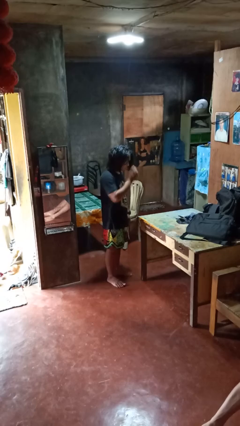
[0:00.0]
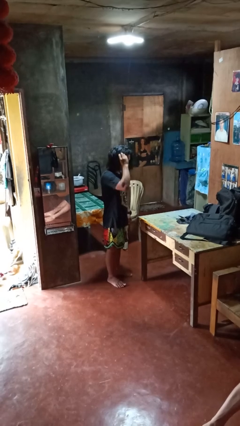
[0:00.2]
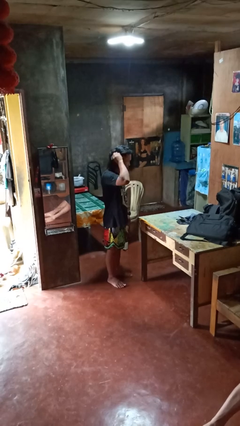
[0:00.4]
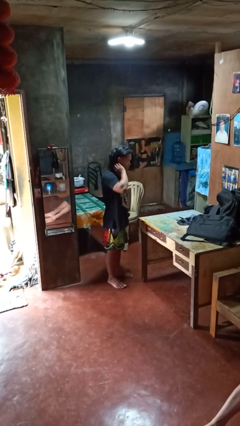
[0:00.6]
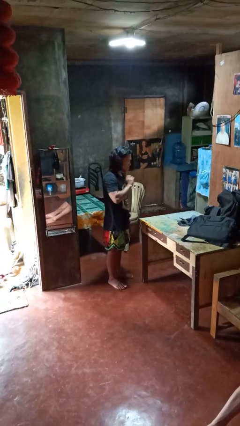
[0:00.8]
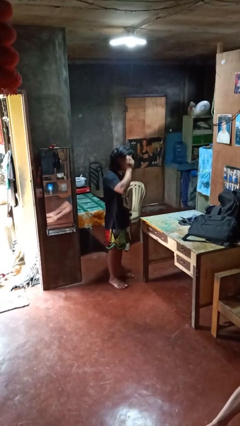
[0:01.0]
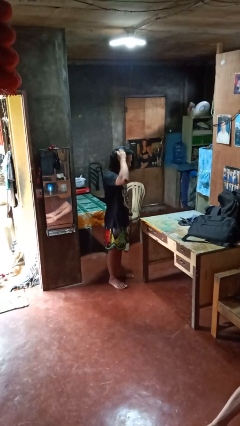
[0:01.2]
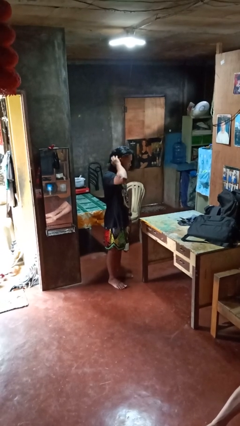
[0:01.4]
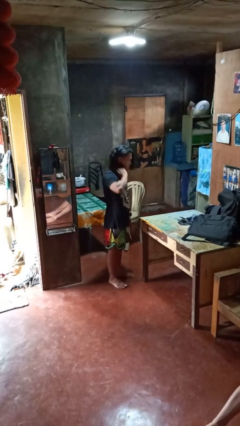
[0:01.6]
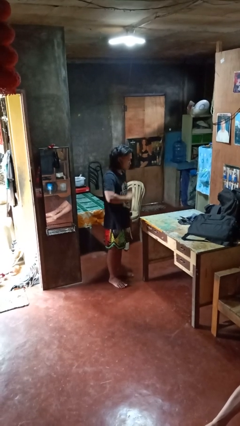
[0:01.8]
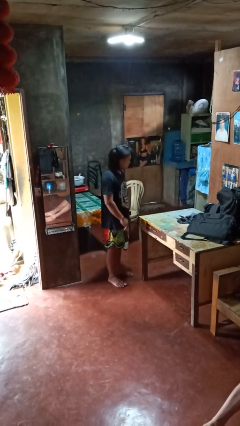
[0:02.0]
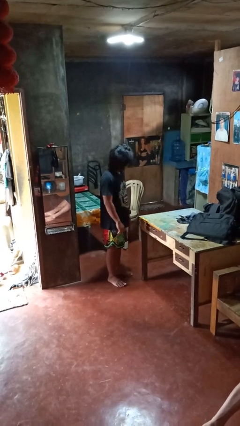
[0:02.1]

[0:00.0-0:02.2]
person strokes hair

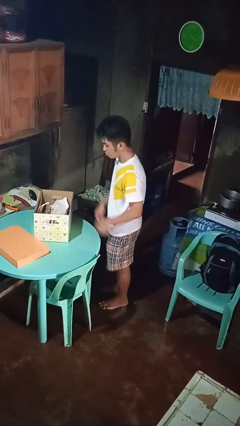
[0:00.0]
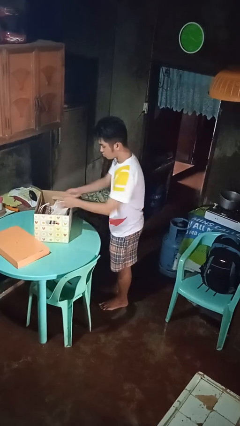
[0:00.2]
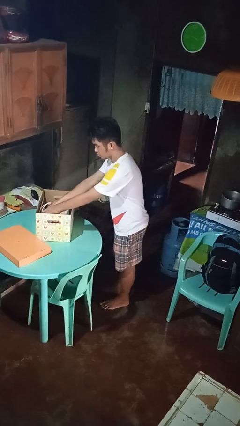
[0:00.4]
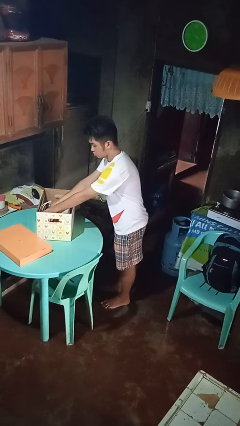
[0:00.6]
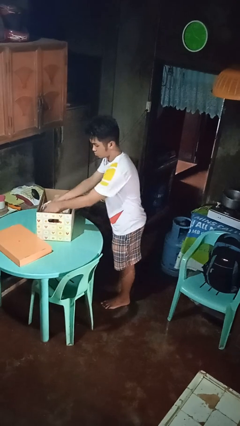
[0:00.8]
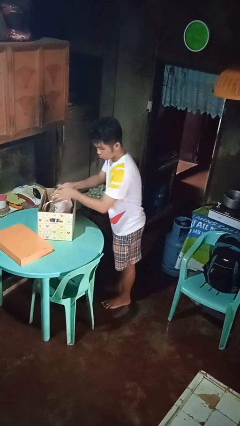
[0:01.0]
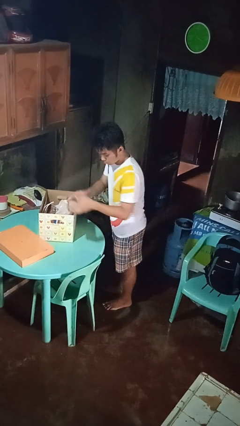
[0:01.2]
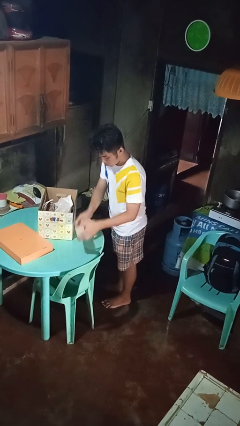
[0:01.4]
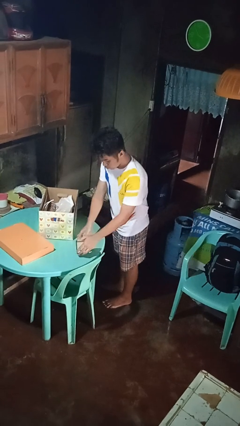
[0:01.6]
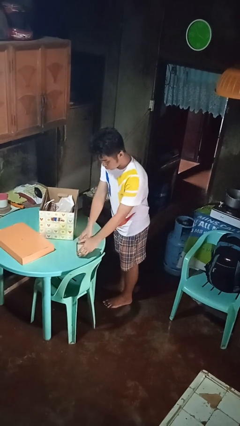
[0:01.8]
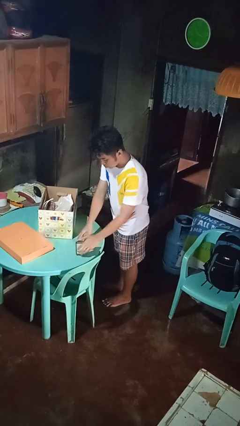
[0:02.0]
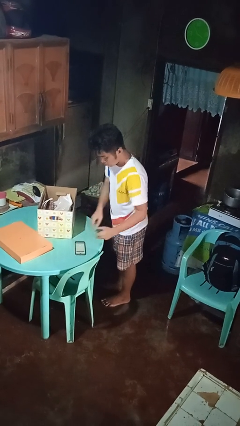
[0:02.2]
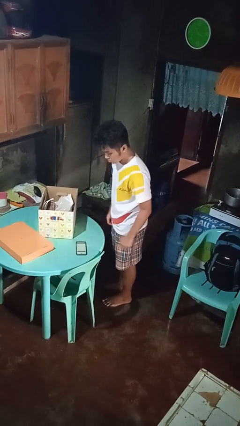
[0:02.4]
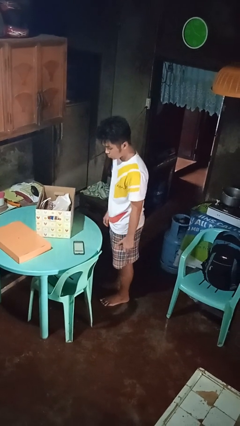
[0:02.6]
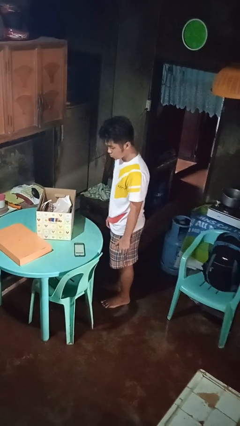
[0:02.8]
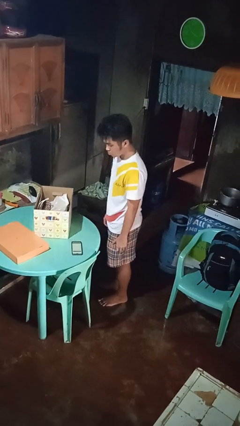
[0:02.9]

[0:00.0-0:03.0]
person takes object from box

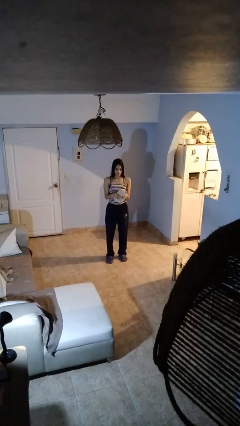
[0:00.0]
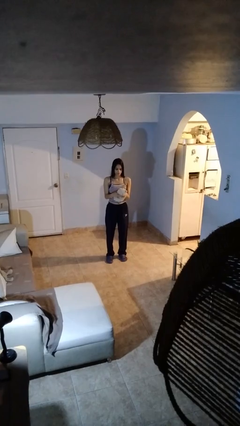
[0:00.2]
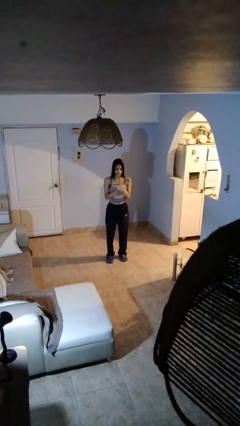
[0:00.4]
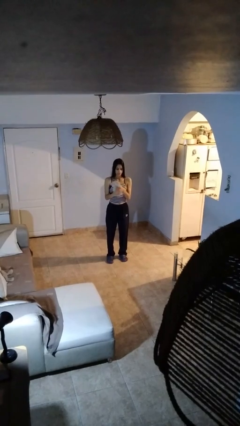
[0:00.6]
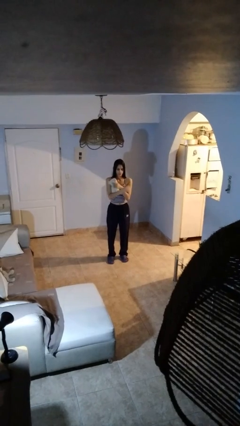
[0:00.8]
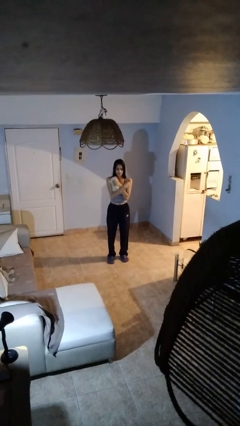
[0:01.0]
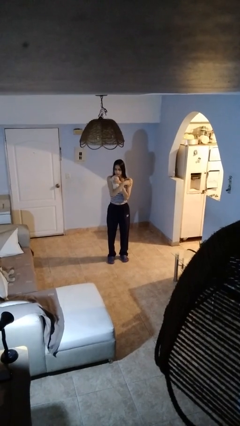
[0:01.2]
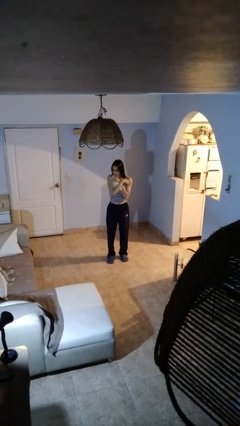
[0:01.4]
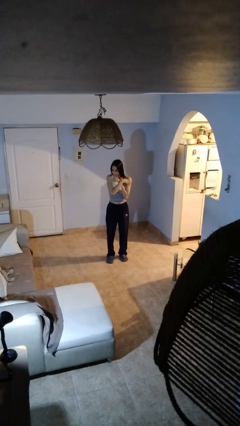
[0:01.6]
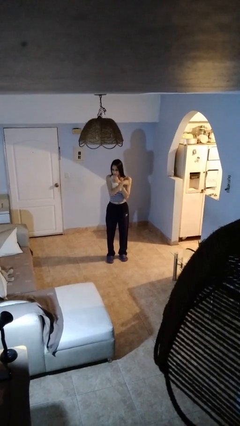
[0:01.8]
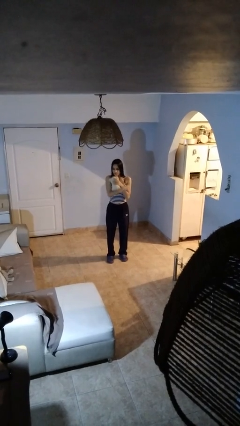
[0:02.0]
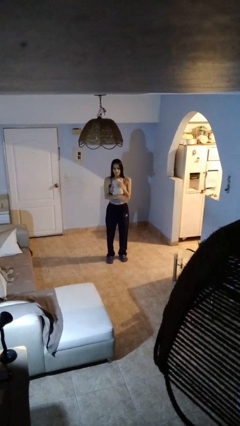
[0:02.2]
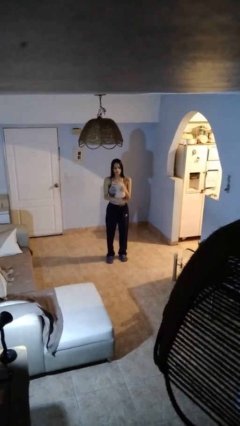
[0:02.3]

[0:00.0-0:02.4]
person hugs stuffed animal

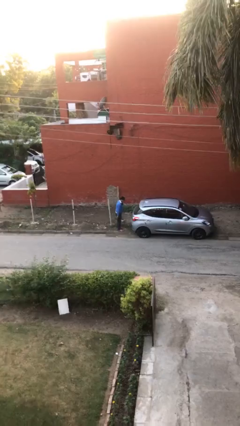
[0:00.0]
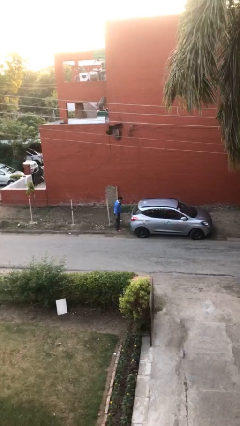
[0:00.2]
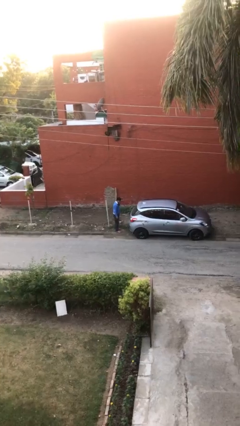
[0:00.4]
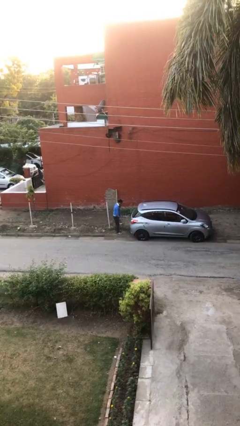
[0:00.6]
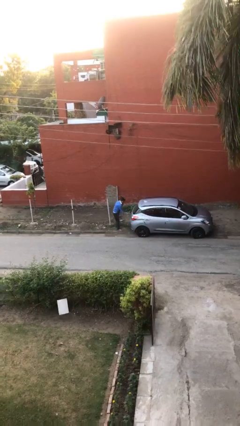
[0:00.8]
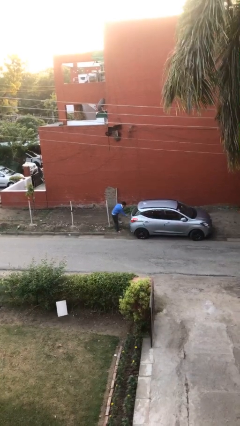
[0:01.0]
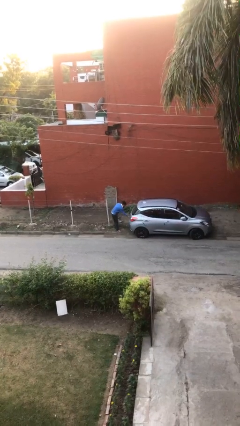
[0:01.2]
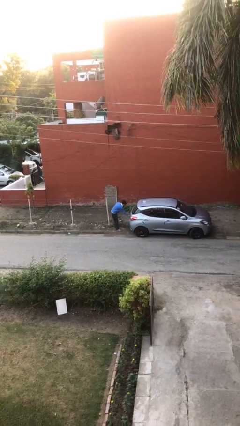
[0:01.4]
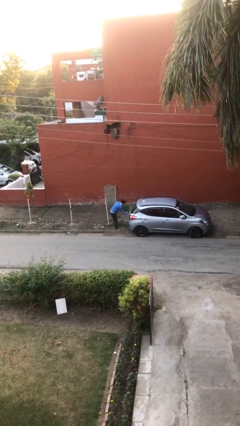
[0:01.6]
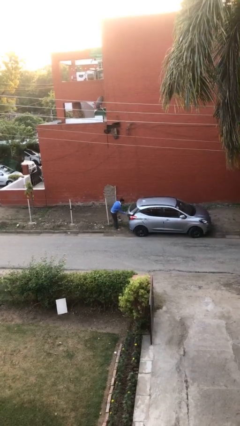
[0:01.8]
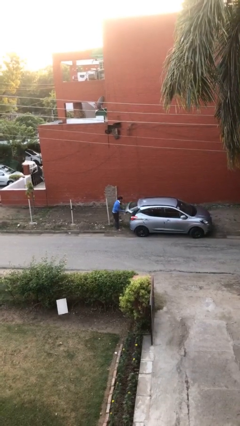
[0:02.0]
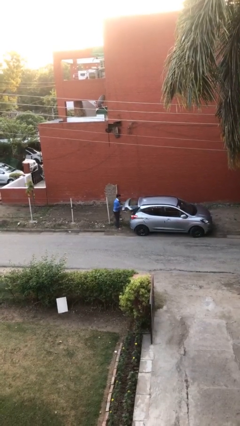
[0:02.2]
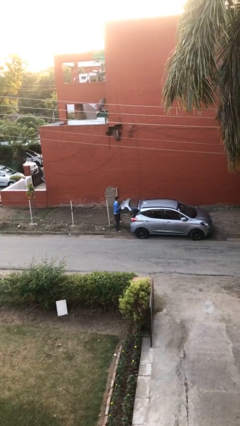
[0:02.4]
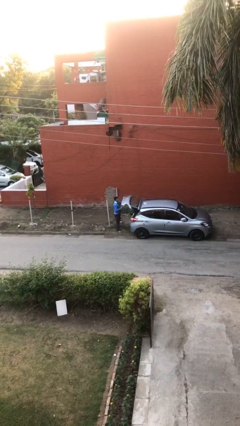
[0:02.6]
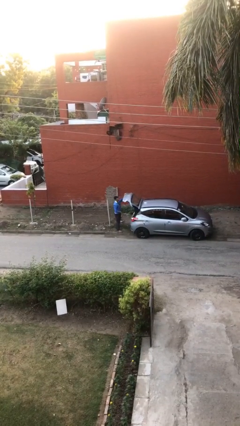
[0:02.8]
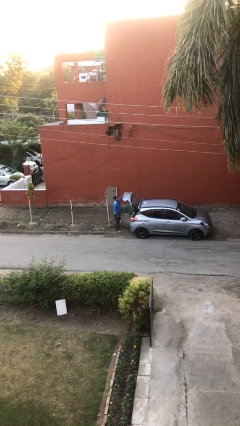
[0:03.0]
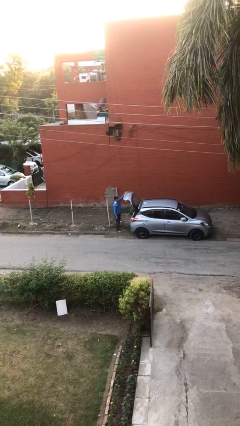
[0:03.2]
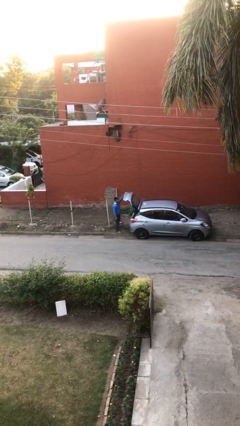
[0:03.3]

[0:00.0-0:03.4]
person opens car trunk

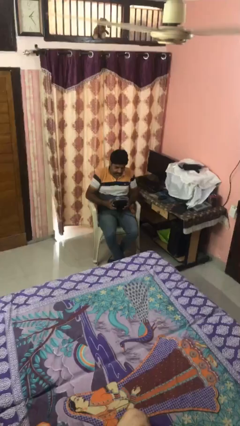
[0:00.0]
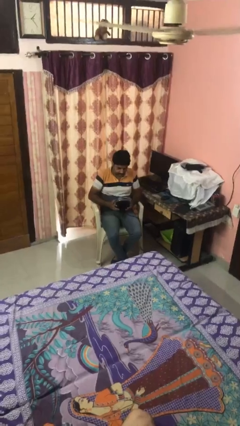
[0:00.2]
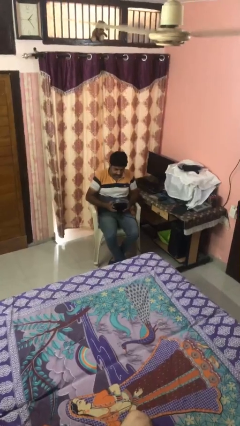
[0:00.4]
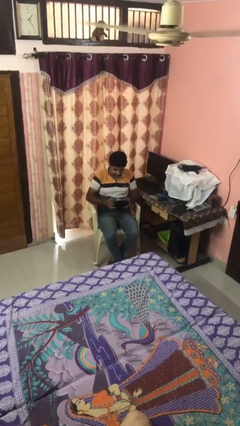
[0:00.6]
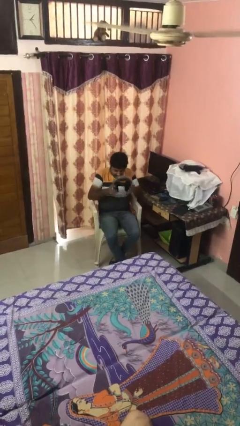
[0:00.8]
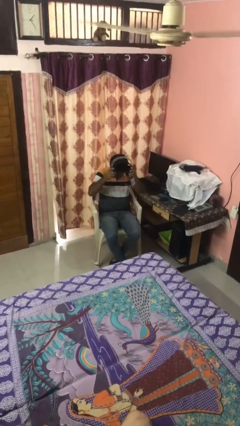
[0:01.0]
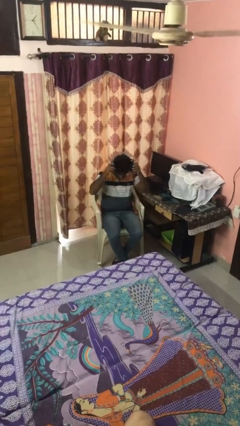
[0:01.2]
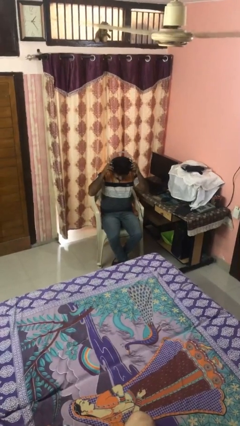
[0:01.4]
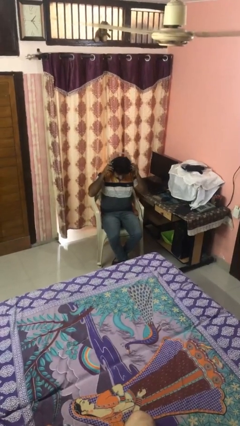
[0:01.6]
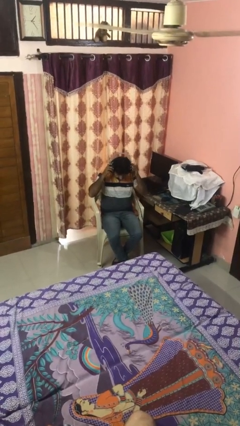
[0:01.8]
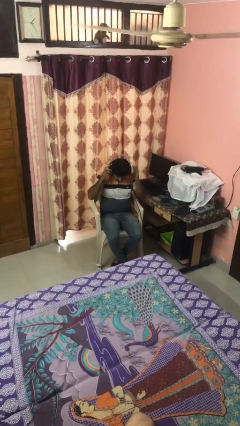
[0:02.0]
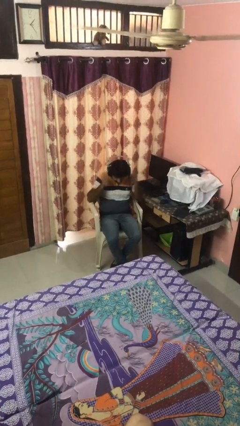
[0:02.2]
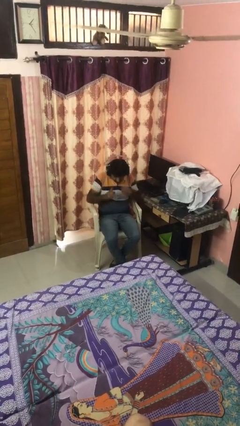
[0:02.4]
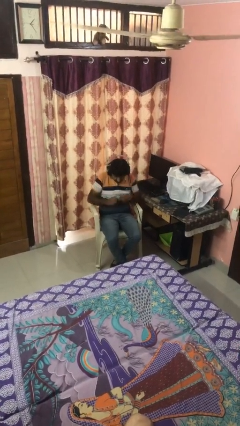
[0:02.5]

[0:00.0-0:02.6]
person puts on headphones

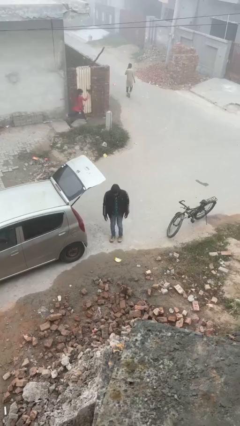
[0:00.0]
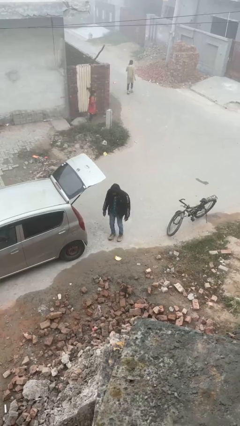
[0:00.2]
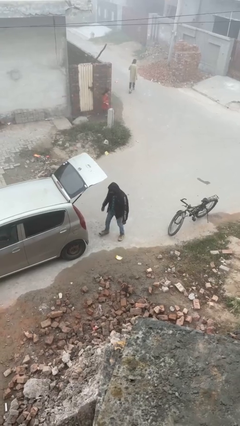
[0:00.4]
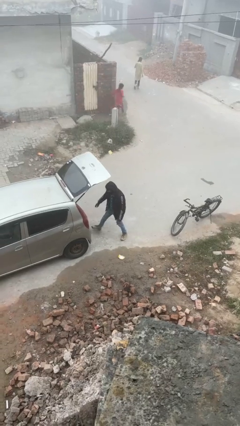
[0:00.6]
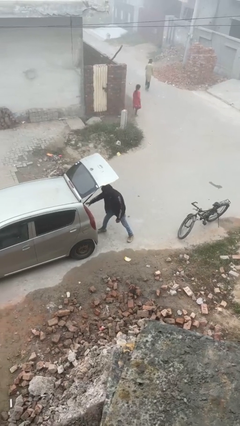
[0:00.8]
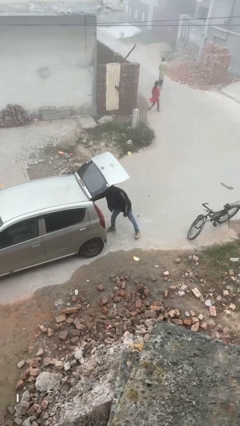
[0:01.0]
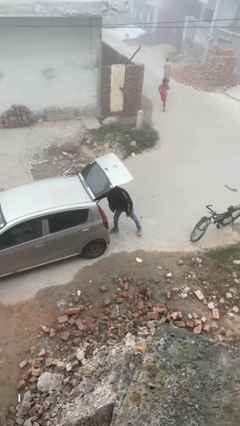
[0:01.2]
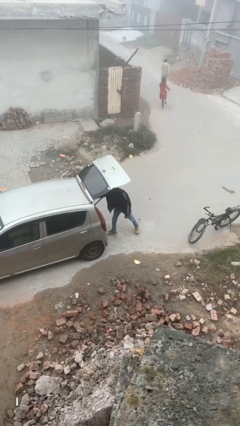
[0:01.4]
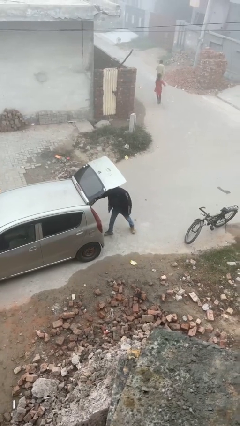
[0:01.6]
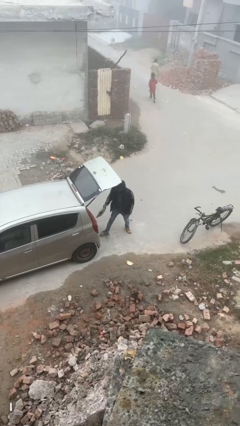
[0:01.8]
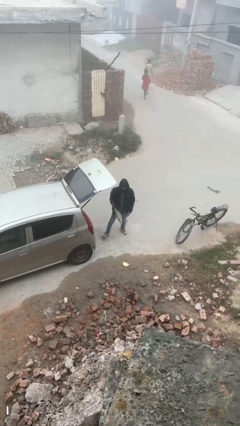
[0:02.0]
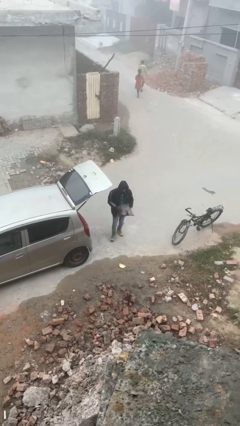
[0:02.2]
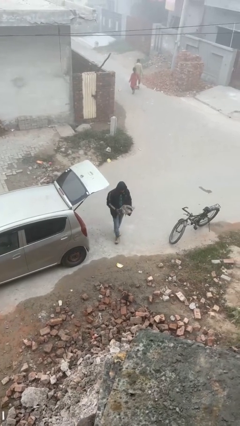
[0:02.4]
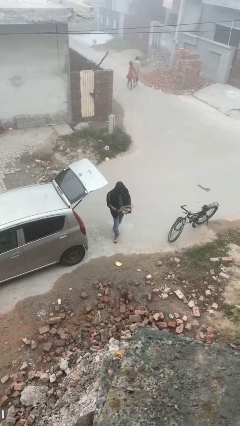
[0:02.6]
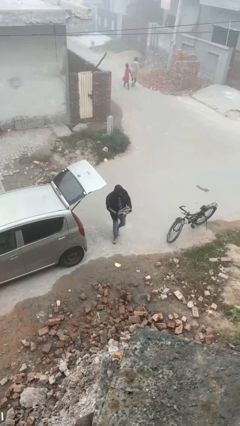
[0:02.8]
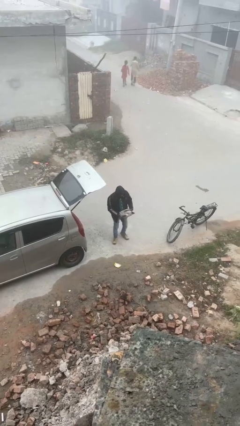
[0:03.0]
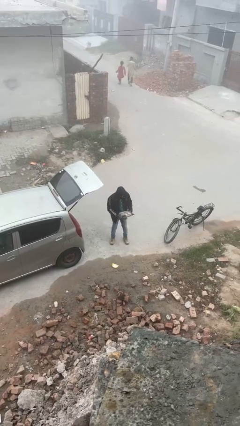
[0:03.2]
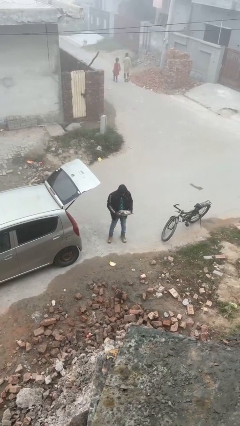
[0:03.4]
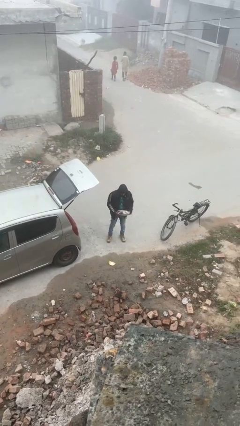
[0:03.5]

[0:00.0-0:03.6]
person unloads car

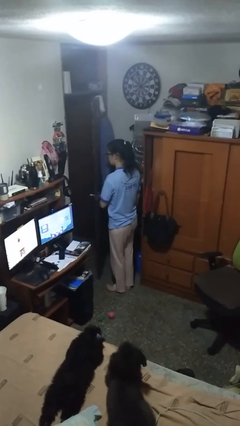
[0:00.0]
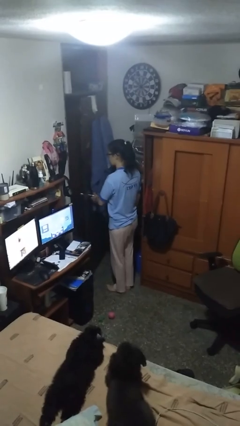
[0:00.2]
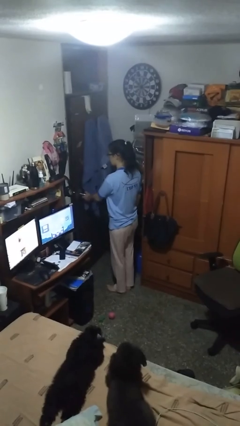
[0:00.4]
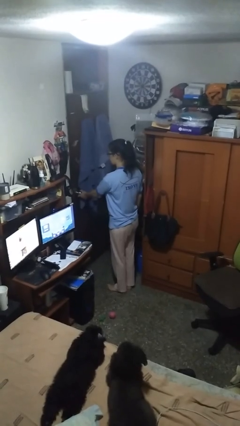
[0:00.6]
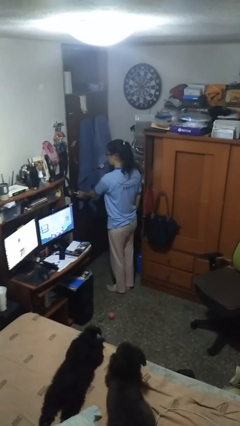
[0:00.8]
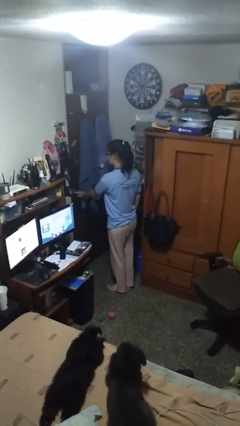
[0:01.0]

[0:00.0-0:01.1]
person closes facility door
